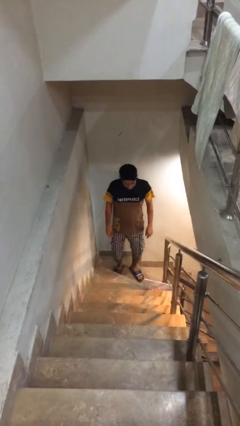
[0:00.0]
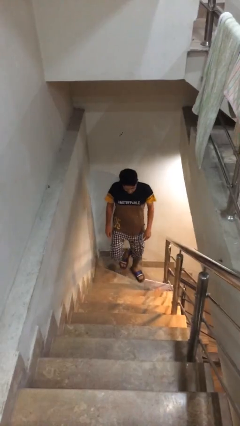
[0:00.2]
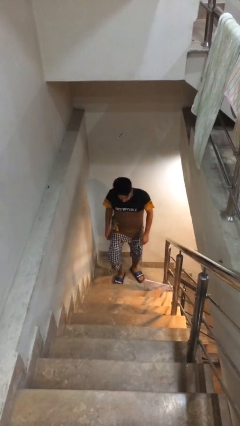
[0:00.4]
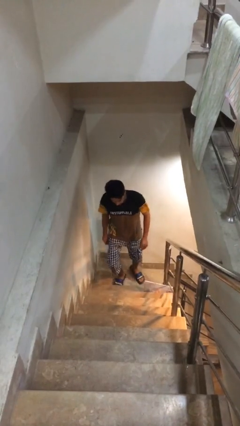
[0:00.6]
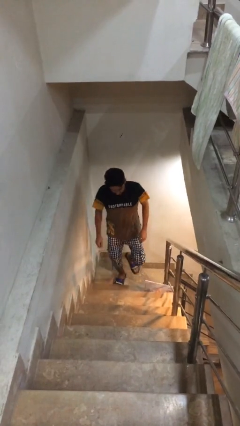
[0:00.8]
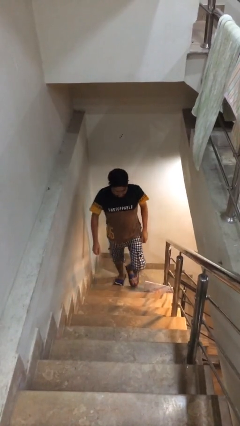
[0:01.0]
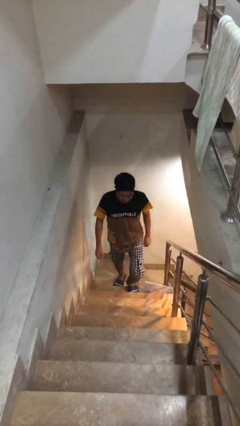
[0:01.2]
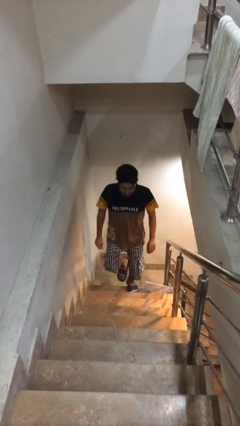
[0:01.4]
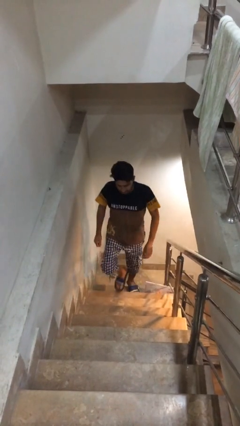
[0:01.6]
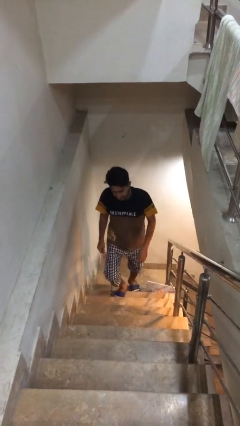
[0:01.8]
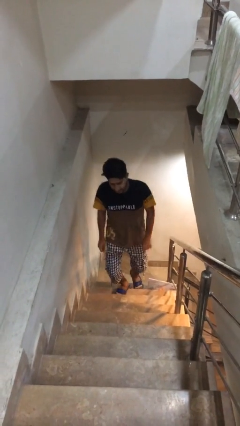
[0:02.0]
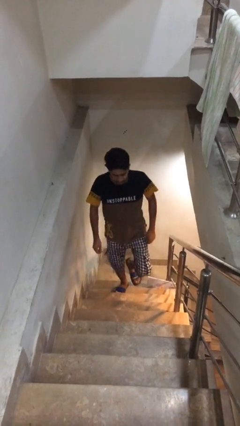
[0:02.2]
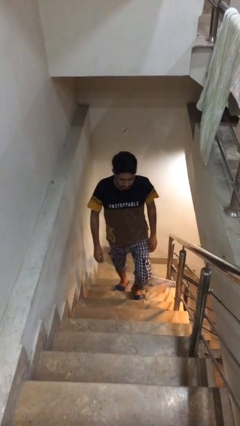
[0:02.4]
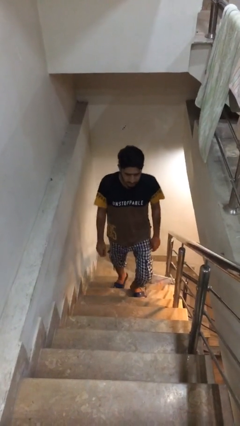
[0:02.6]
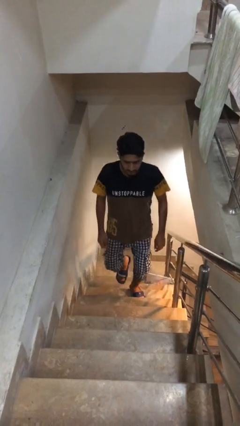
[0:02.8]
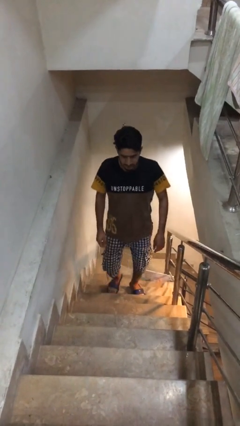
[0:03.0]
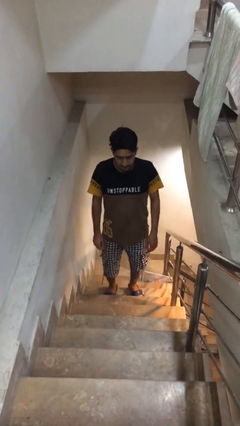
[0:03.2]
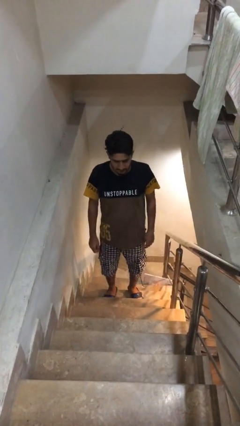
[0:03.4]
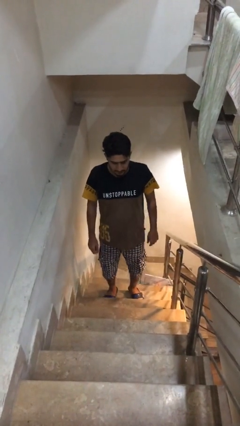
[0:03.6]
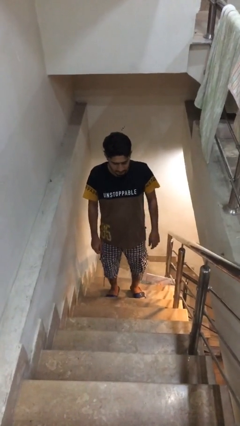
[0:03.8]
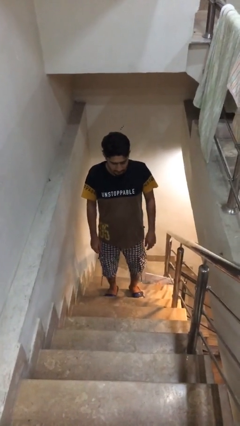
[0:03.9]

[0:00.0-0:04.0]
person climbs up stairs

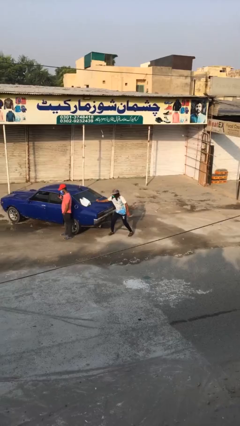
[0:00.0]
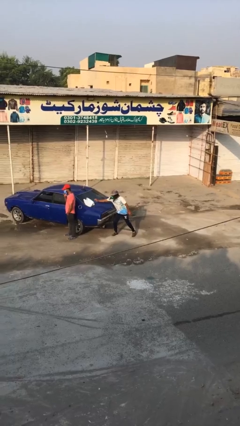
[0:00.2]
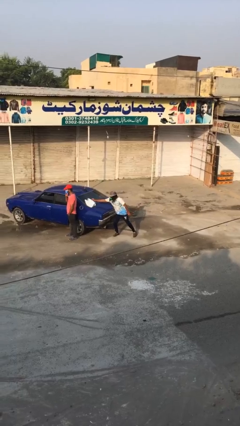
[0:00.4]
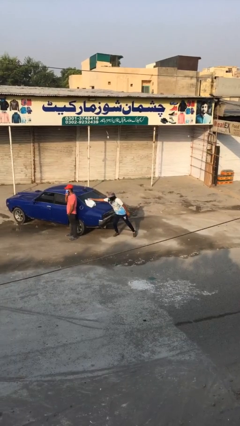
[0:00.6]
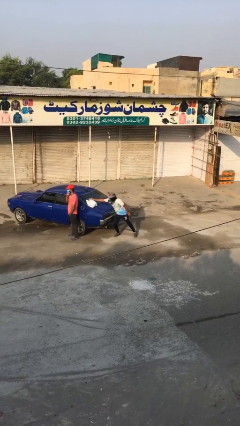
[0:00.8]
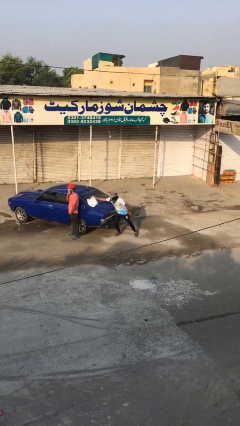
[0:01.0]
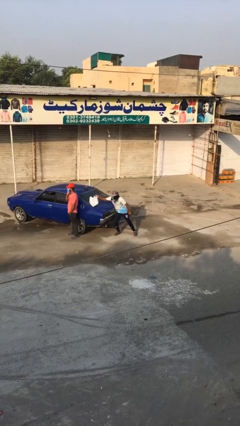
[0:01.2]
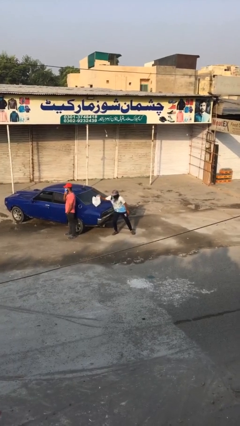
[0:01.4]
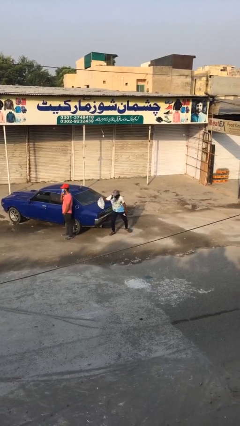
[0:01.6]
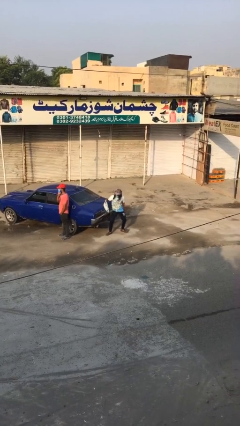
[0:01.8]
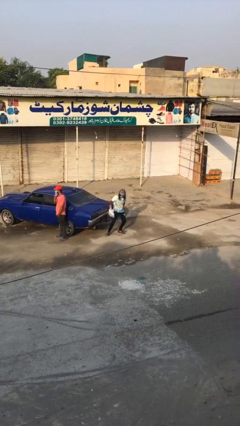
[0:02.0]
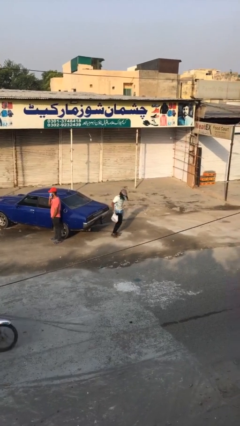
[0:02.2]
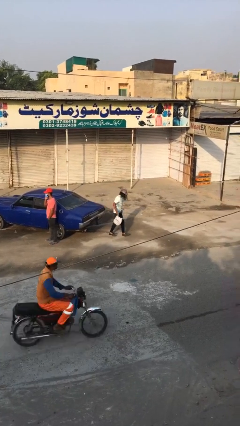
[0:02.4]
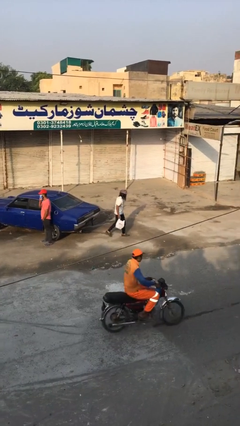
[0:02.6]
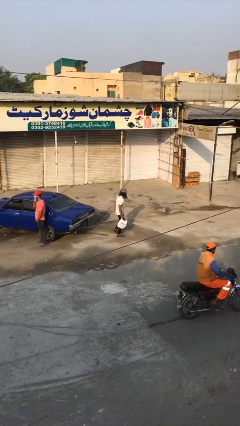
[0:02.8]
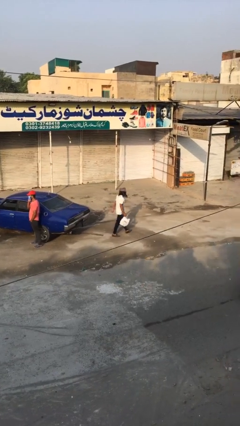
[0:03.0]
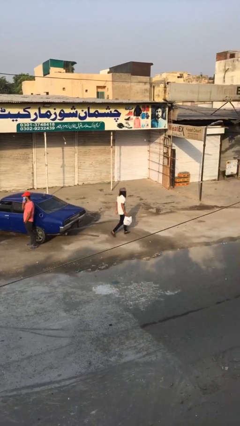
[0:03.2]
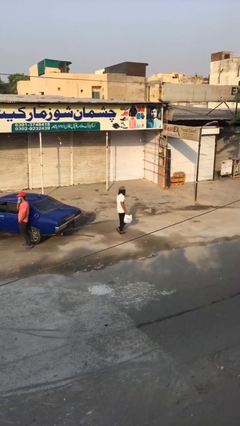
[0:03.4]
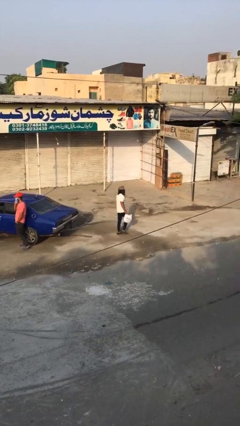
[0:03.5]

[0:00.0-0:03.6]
person steals object from person

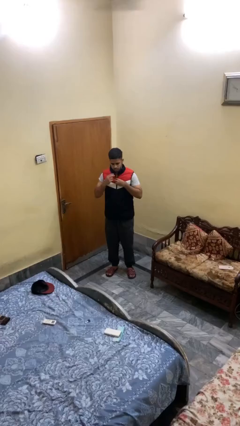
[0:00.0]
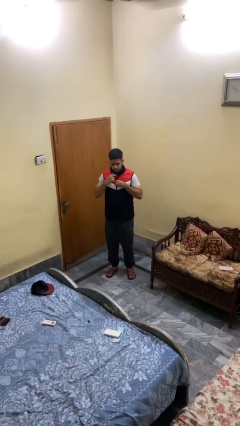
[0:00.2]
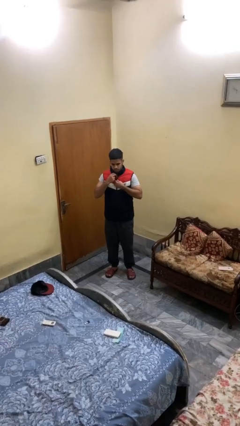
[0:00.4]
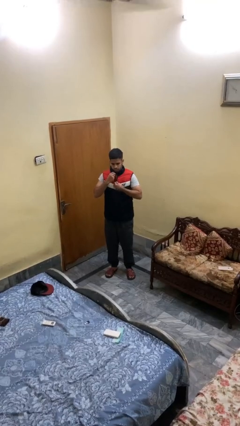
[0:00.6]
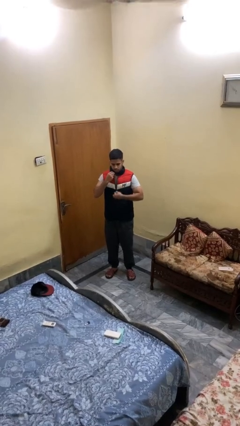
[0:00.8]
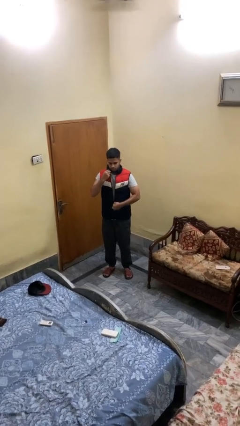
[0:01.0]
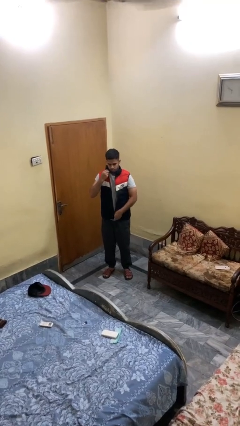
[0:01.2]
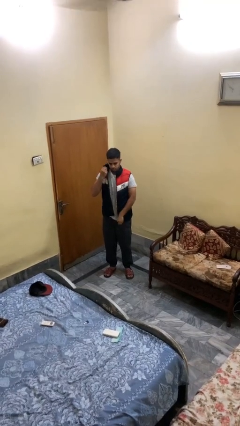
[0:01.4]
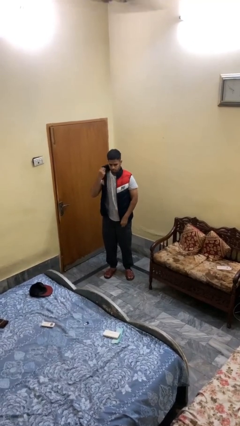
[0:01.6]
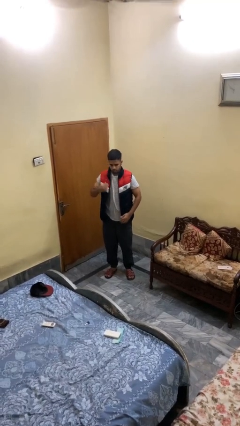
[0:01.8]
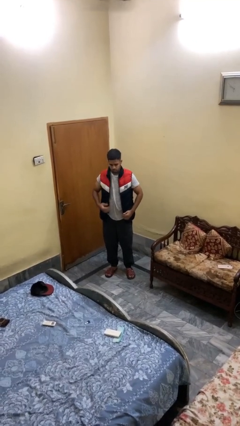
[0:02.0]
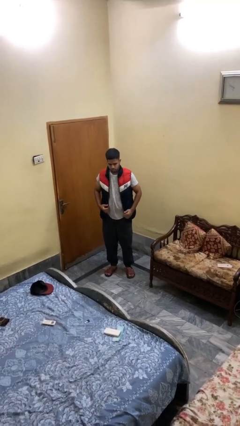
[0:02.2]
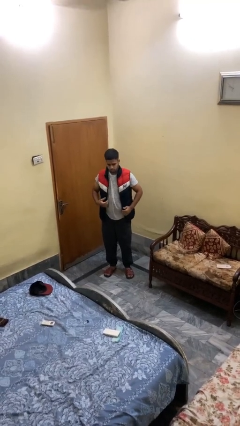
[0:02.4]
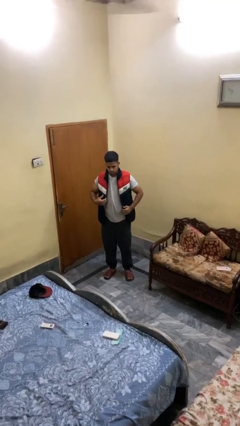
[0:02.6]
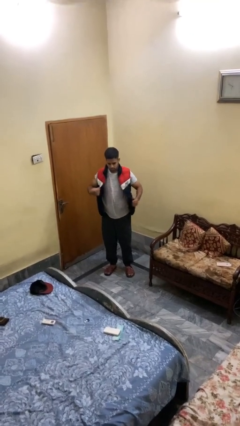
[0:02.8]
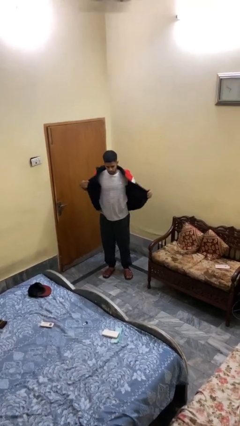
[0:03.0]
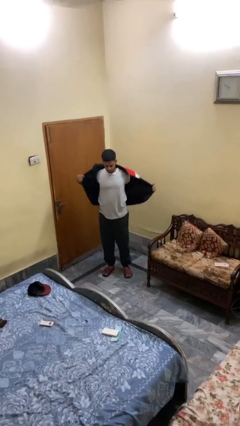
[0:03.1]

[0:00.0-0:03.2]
person unzips jacket

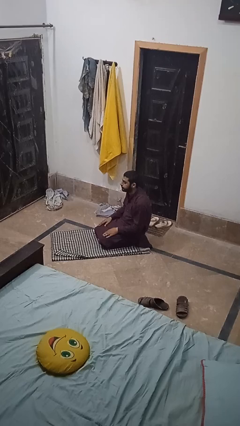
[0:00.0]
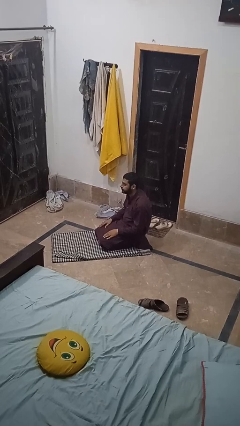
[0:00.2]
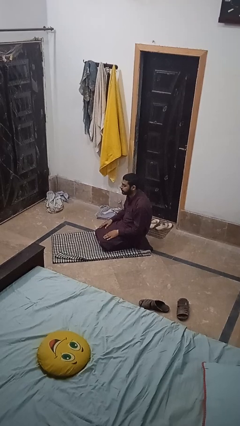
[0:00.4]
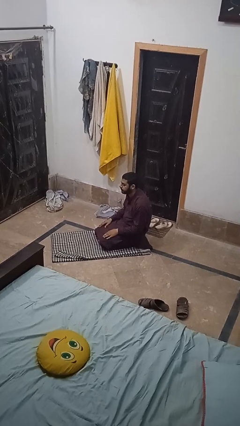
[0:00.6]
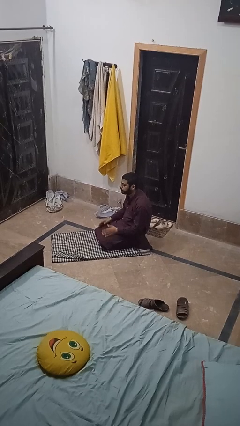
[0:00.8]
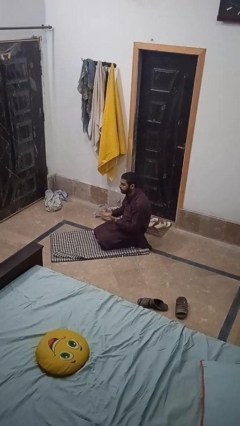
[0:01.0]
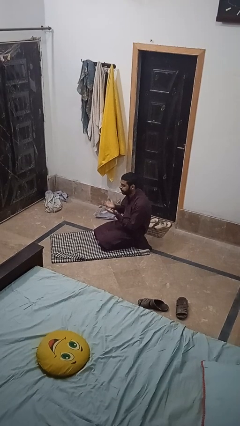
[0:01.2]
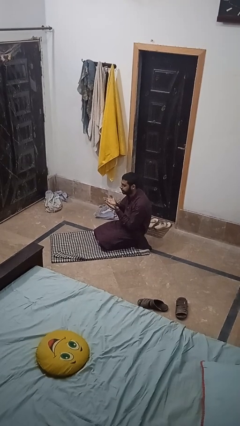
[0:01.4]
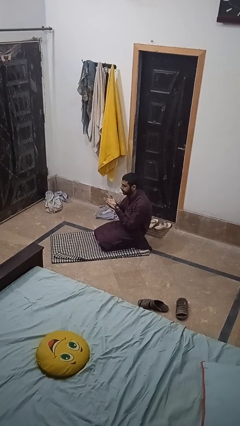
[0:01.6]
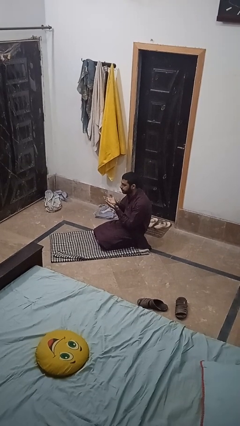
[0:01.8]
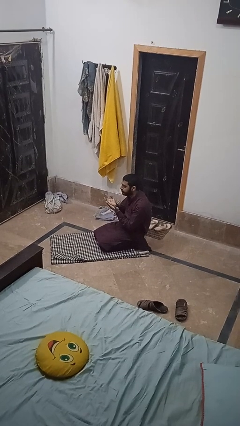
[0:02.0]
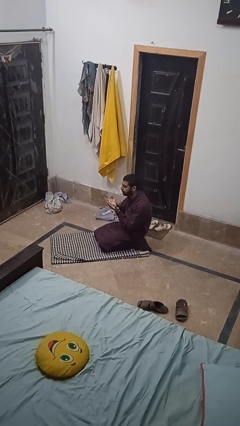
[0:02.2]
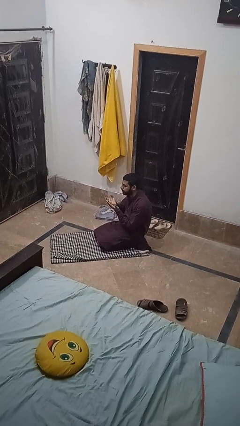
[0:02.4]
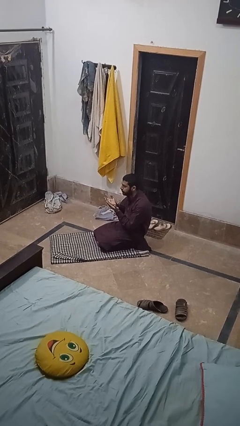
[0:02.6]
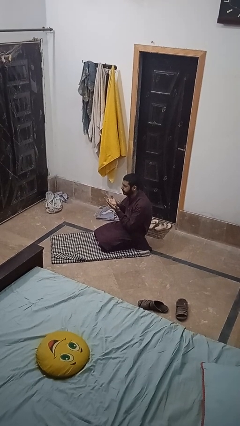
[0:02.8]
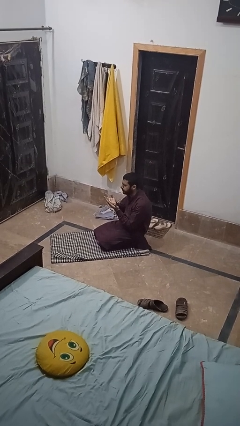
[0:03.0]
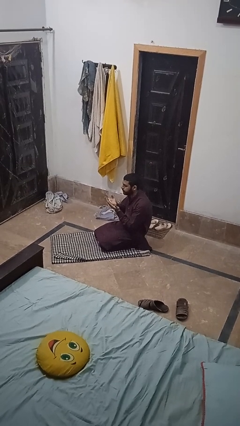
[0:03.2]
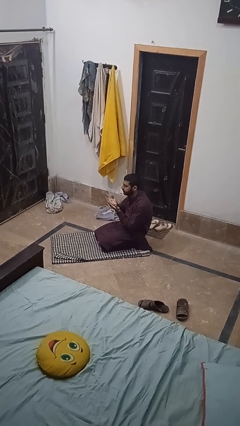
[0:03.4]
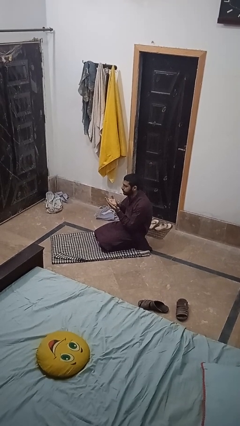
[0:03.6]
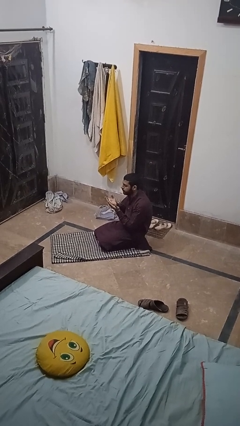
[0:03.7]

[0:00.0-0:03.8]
person prays

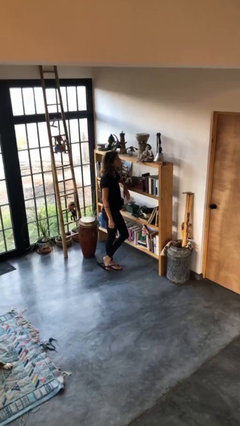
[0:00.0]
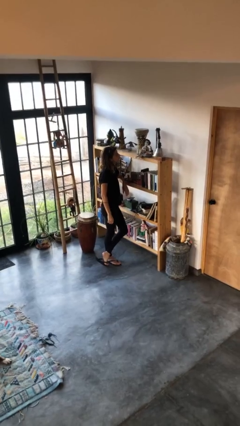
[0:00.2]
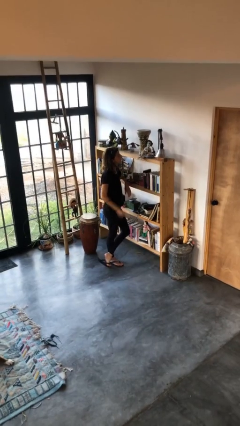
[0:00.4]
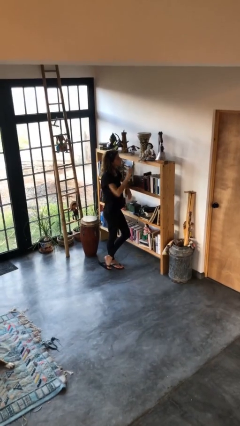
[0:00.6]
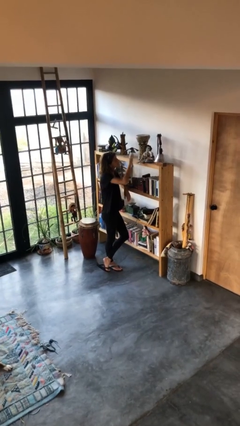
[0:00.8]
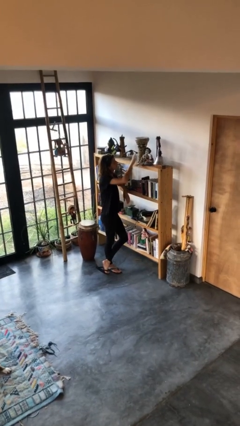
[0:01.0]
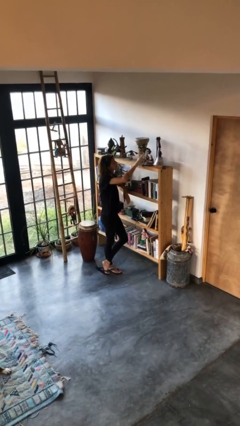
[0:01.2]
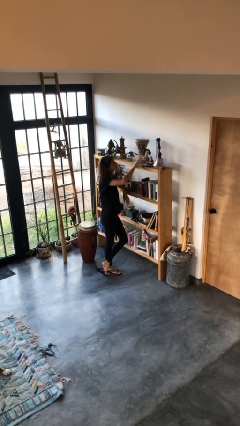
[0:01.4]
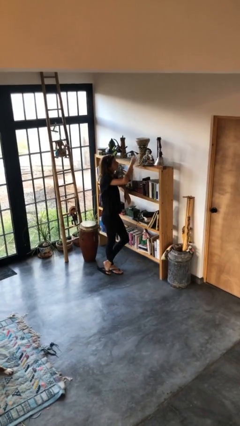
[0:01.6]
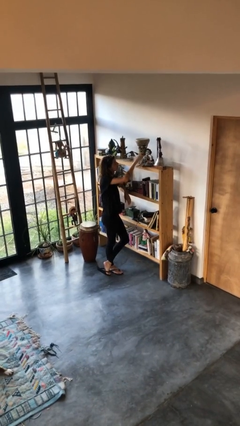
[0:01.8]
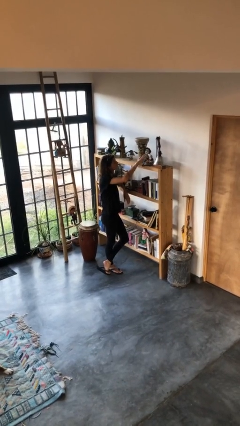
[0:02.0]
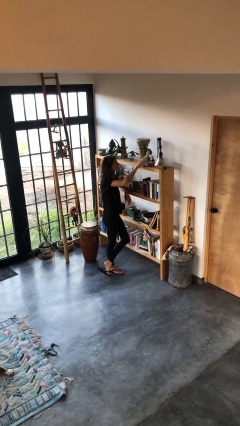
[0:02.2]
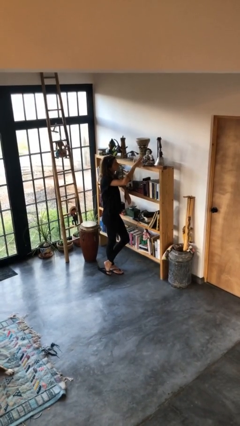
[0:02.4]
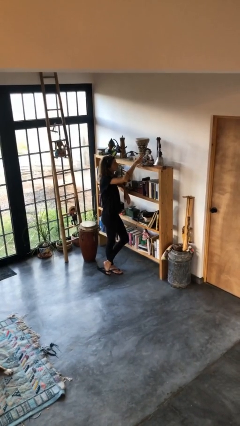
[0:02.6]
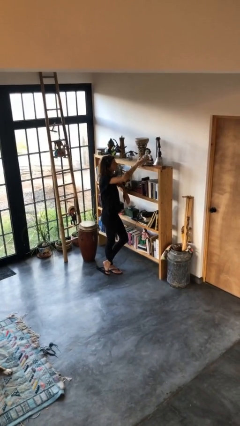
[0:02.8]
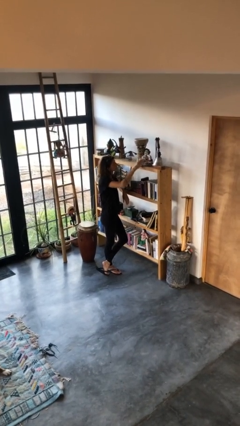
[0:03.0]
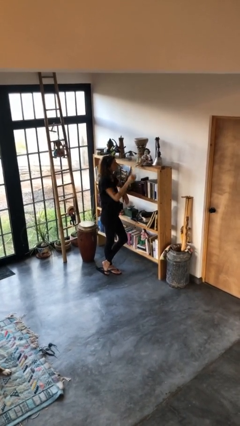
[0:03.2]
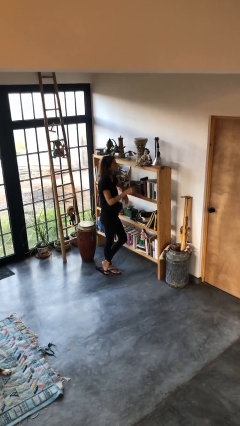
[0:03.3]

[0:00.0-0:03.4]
person waves hand over object
